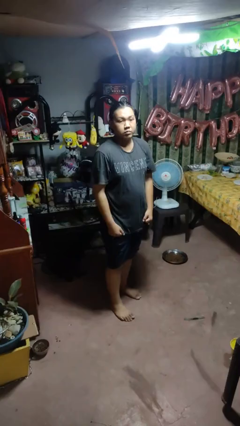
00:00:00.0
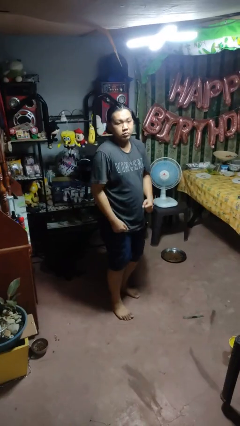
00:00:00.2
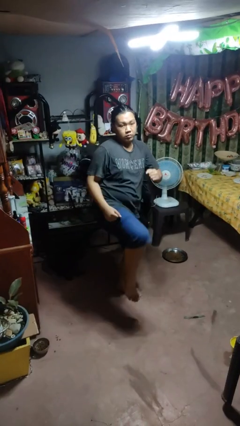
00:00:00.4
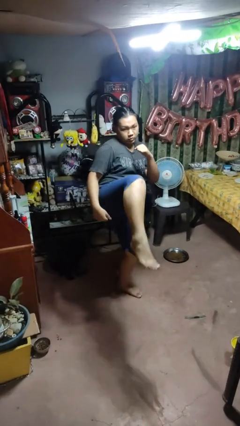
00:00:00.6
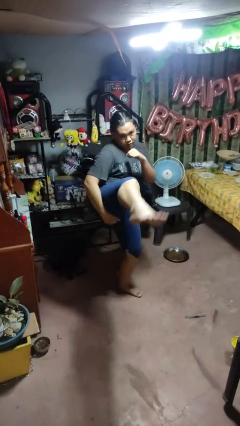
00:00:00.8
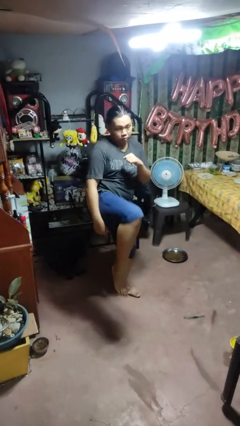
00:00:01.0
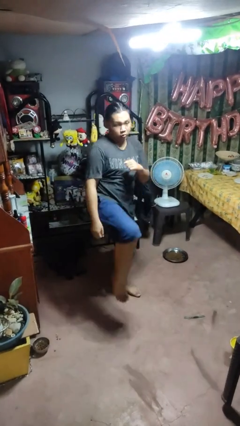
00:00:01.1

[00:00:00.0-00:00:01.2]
person karate kicks

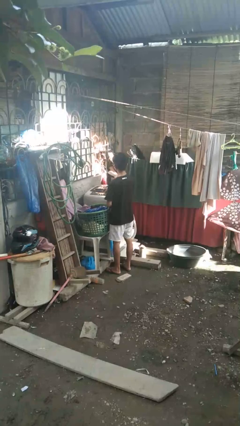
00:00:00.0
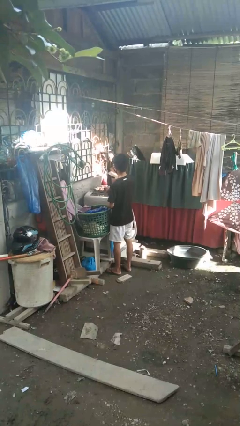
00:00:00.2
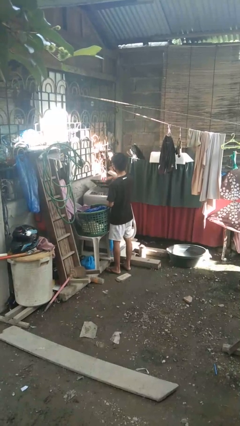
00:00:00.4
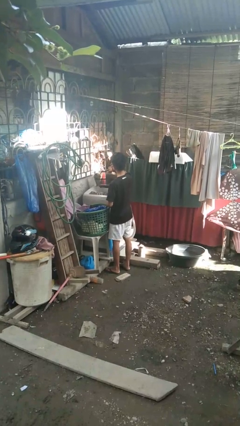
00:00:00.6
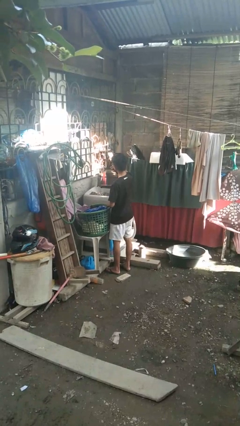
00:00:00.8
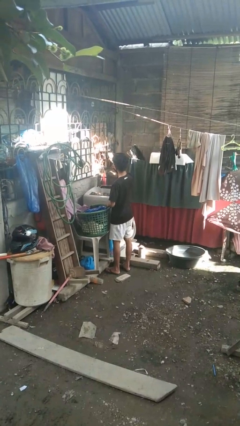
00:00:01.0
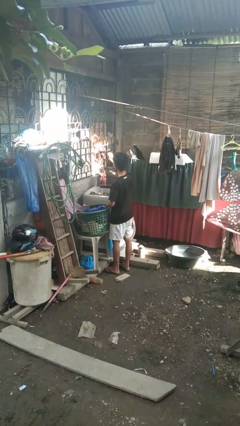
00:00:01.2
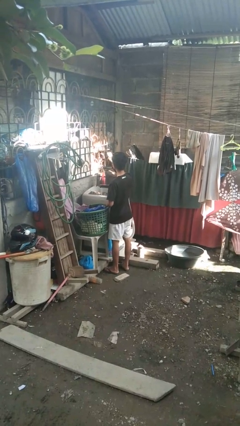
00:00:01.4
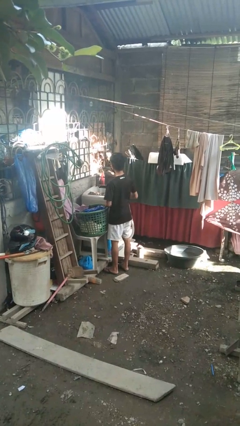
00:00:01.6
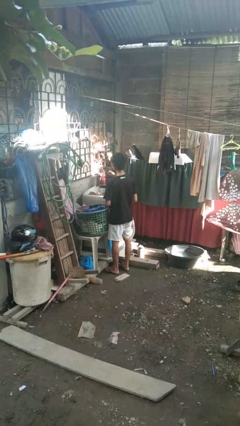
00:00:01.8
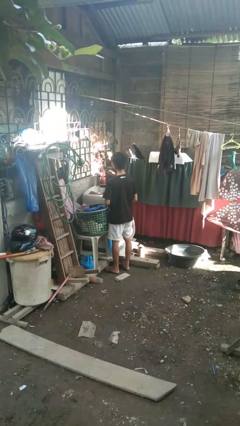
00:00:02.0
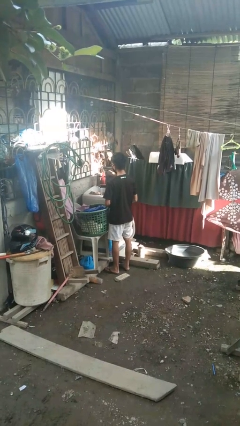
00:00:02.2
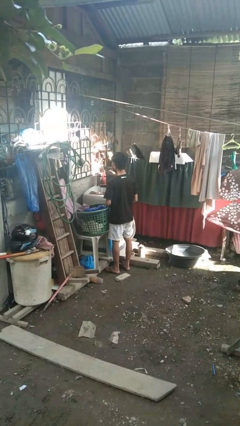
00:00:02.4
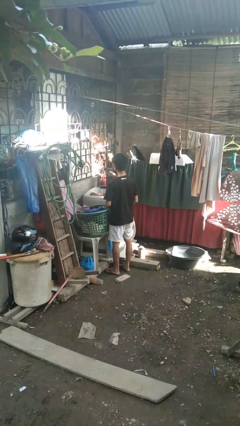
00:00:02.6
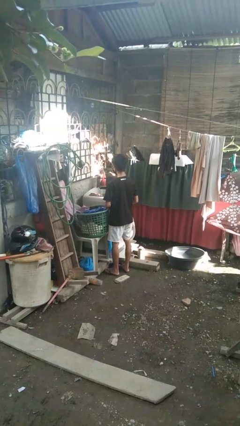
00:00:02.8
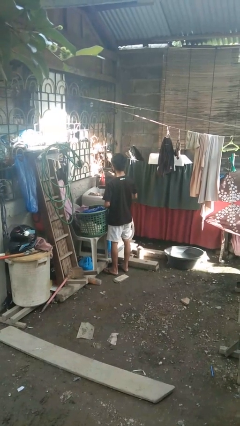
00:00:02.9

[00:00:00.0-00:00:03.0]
person opens clothes washer

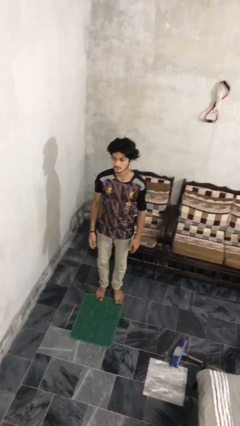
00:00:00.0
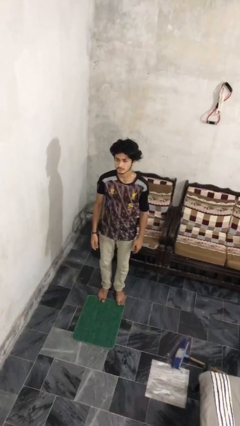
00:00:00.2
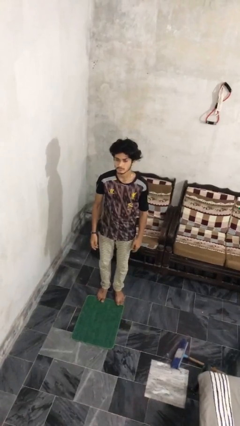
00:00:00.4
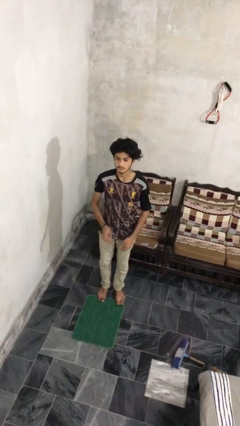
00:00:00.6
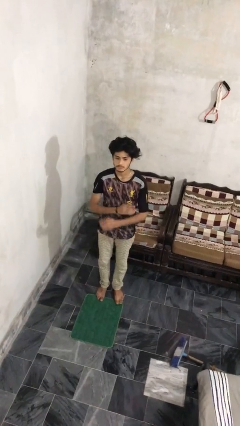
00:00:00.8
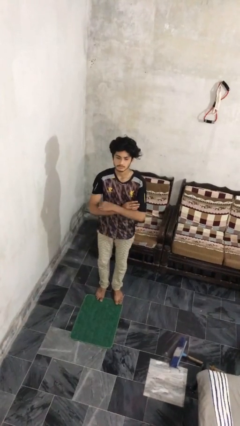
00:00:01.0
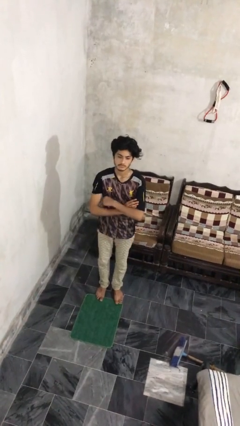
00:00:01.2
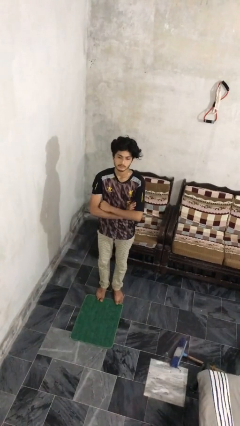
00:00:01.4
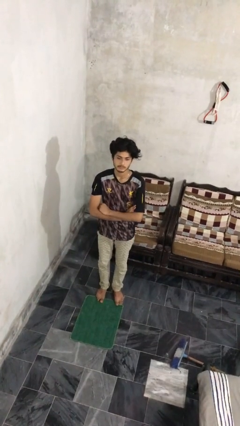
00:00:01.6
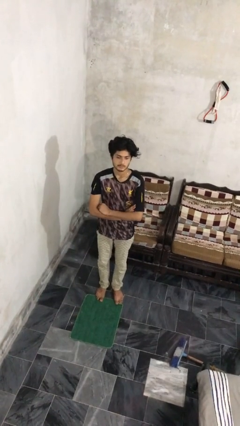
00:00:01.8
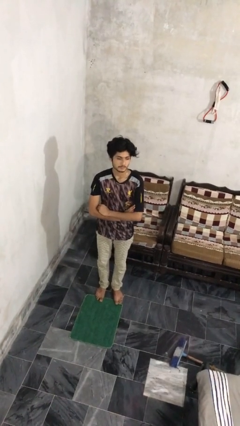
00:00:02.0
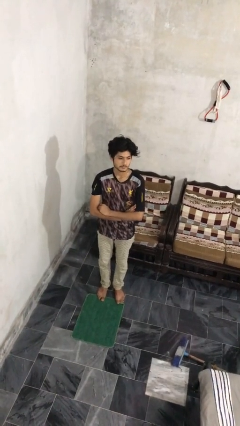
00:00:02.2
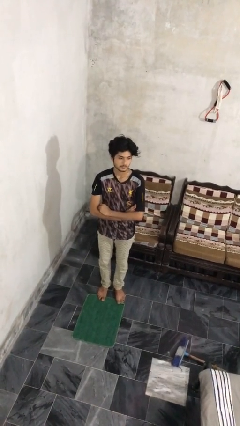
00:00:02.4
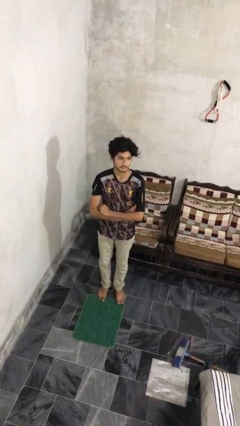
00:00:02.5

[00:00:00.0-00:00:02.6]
person crosses arms

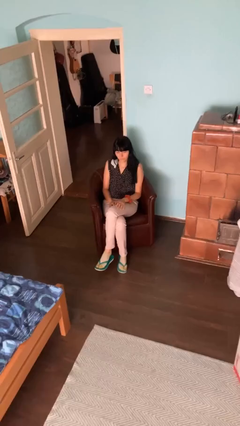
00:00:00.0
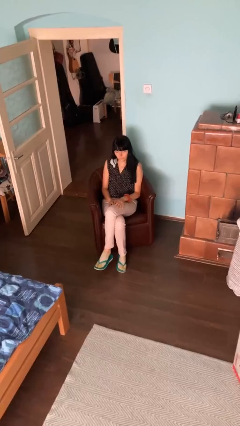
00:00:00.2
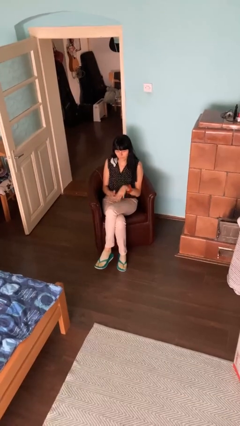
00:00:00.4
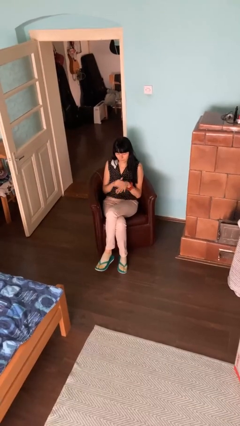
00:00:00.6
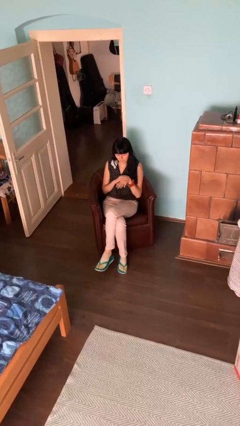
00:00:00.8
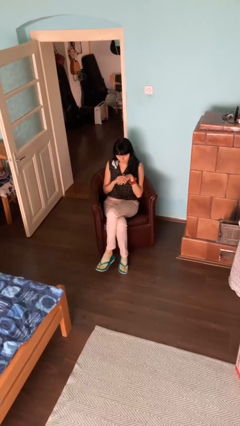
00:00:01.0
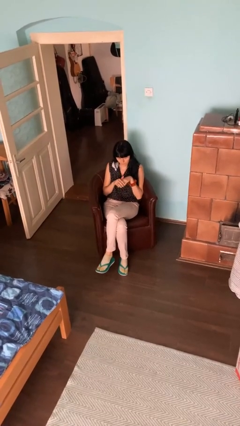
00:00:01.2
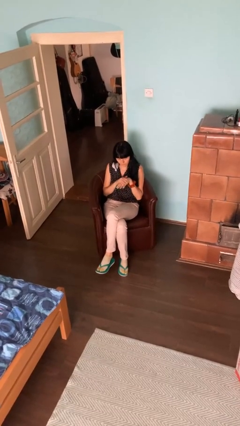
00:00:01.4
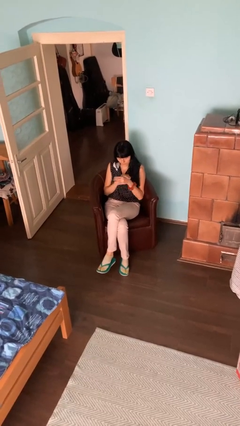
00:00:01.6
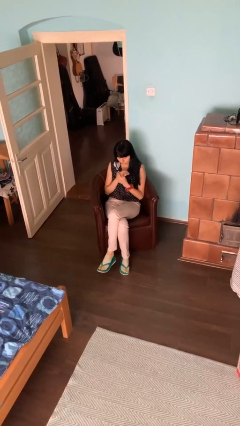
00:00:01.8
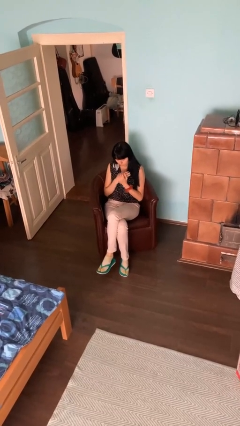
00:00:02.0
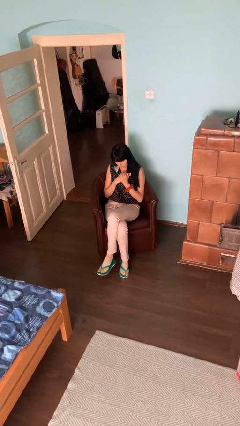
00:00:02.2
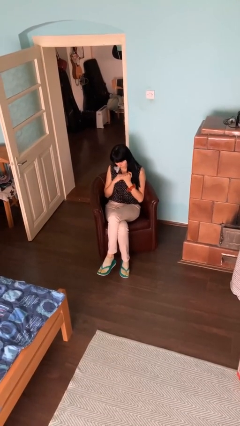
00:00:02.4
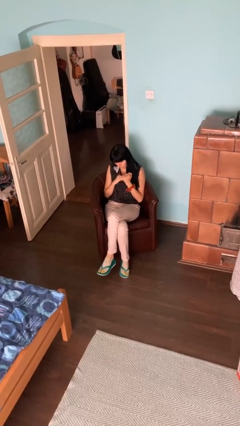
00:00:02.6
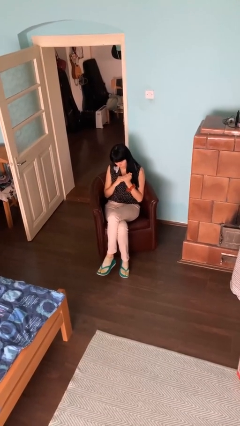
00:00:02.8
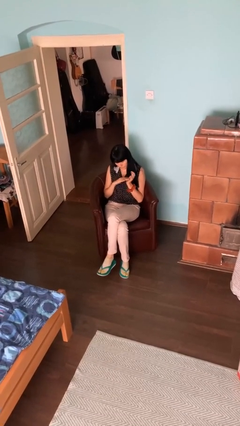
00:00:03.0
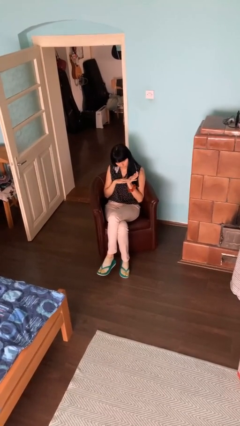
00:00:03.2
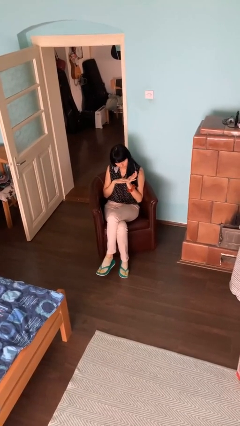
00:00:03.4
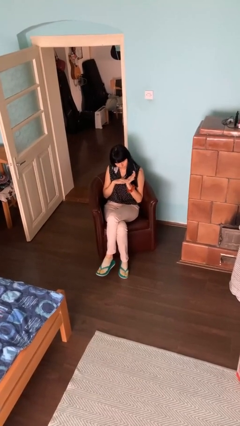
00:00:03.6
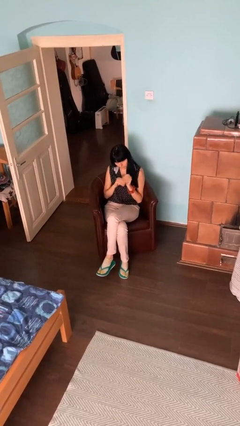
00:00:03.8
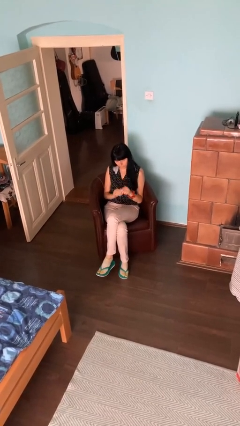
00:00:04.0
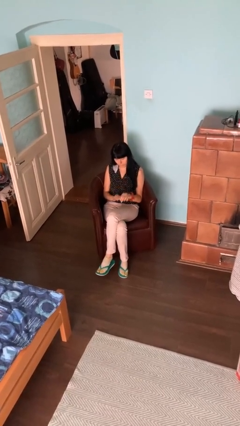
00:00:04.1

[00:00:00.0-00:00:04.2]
person looks at hands in lap

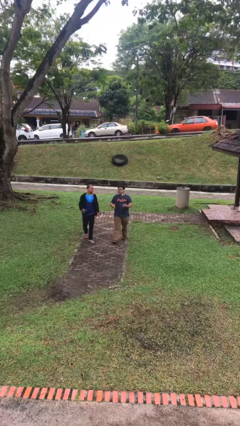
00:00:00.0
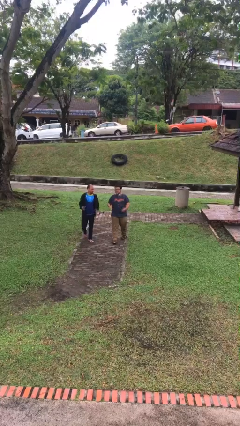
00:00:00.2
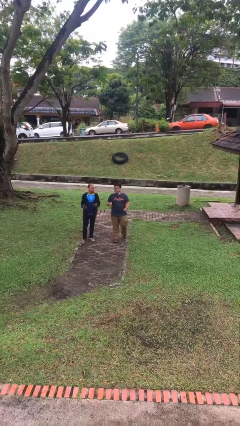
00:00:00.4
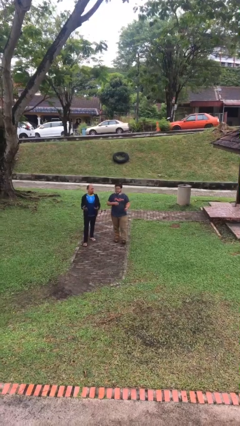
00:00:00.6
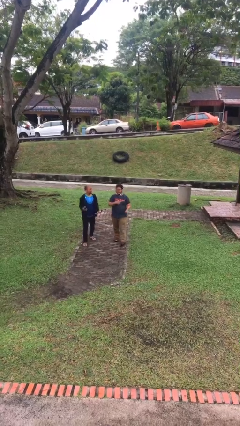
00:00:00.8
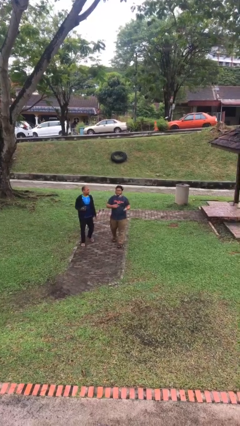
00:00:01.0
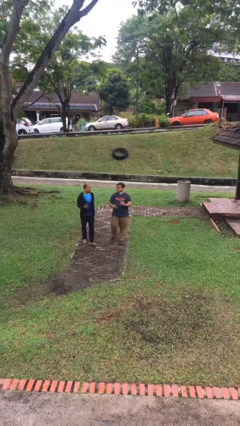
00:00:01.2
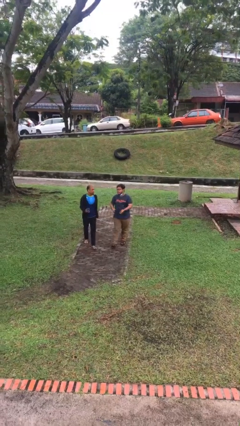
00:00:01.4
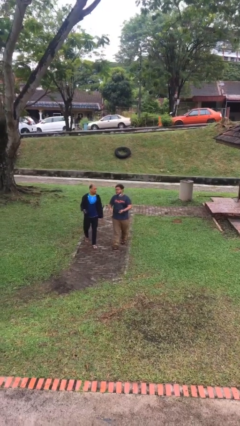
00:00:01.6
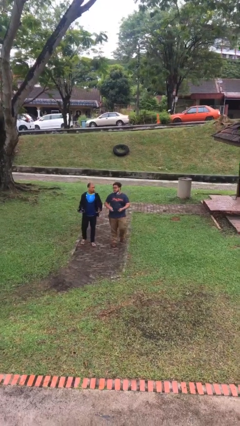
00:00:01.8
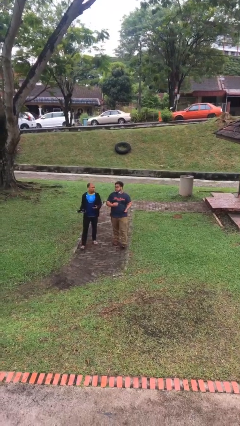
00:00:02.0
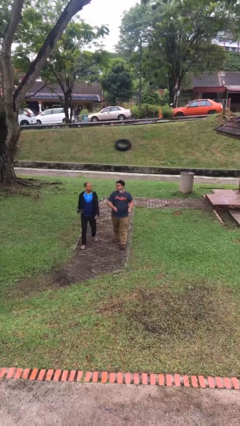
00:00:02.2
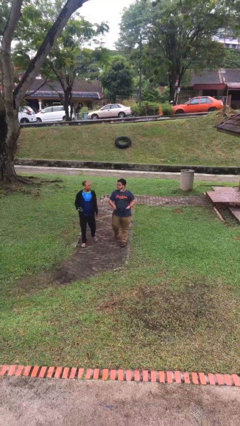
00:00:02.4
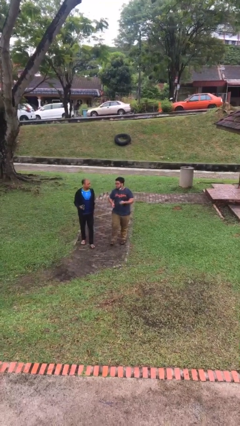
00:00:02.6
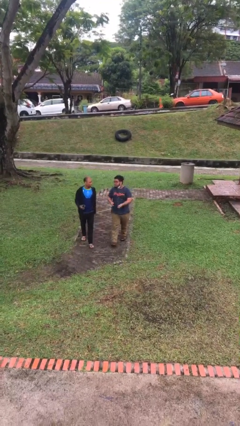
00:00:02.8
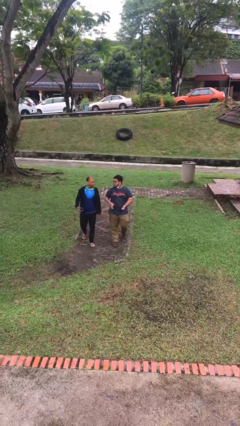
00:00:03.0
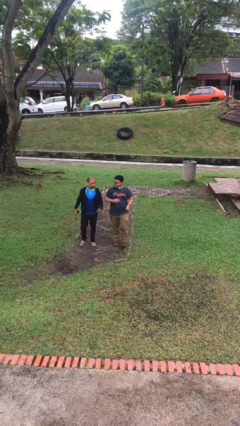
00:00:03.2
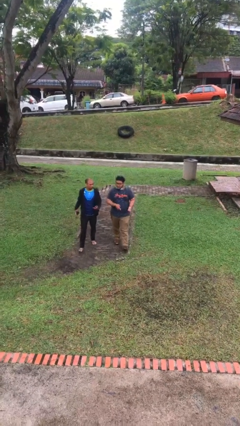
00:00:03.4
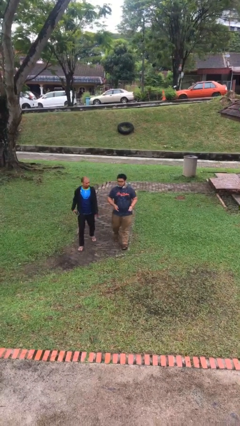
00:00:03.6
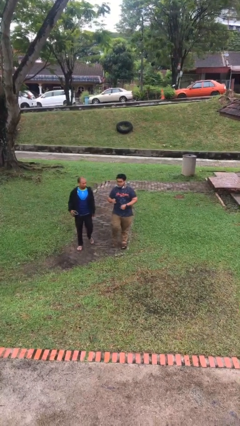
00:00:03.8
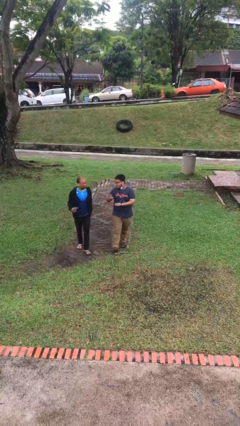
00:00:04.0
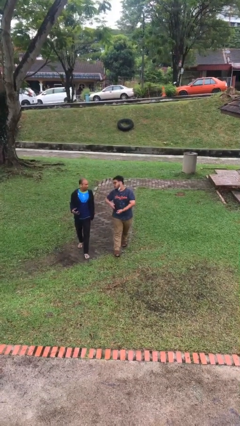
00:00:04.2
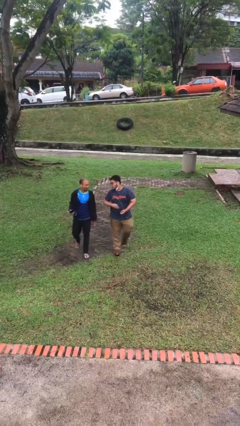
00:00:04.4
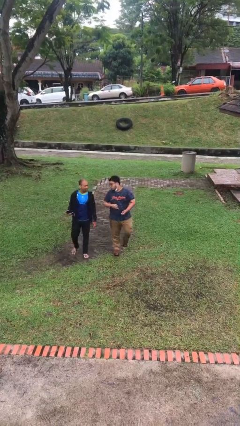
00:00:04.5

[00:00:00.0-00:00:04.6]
person talks to person

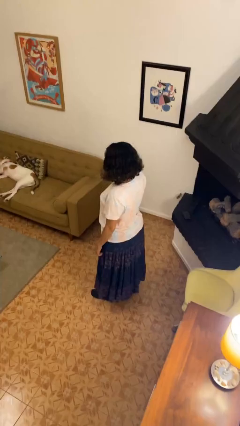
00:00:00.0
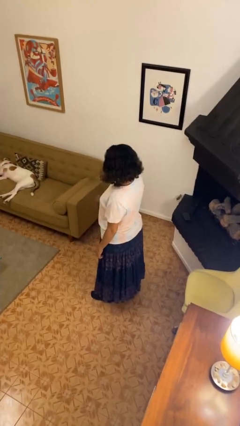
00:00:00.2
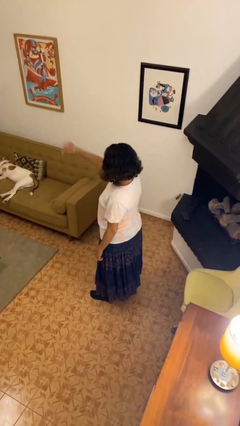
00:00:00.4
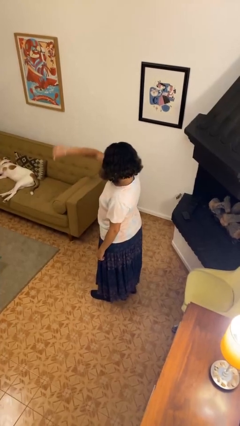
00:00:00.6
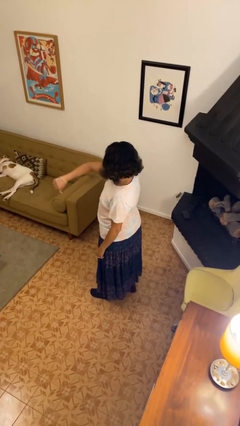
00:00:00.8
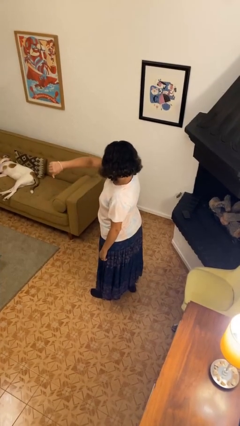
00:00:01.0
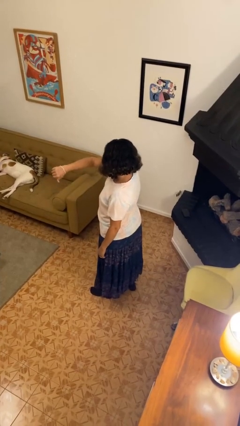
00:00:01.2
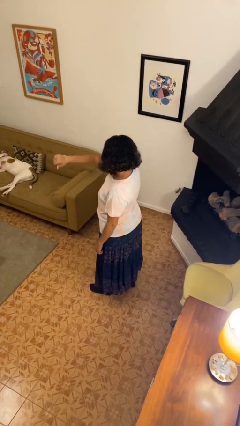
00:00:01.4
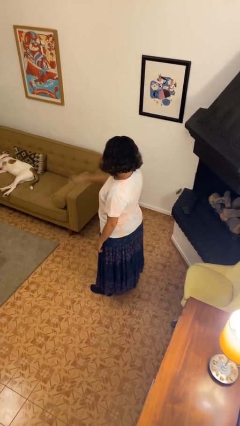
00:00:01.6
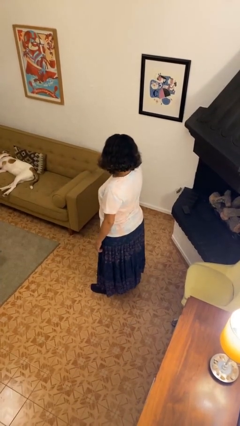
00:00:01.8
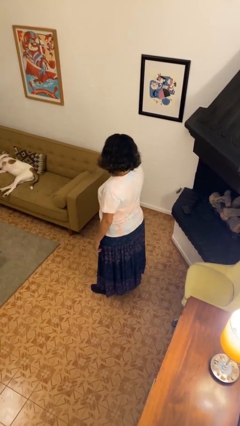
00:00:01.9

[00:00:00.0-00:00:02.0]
person gestures thumbs down
